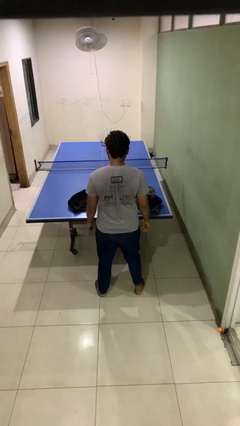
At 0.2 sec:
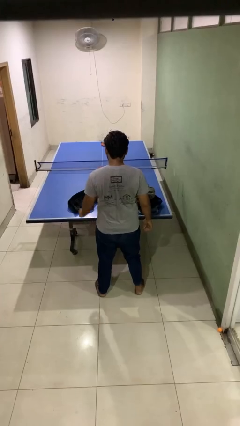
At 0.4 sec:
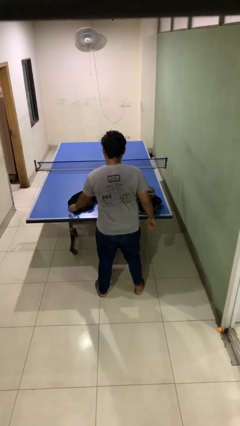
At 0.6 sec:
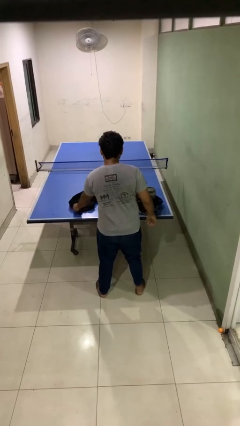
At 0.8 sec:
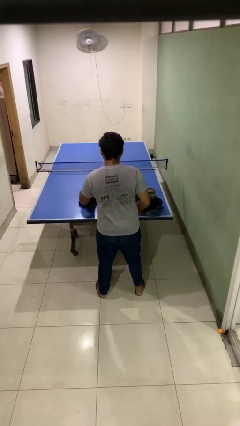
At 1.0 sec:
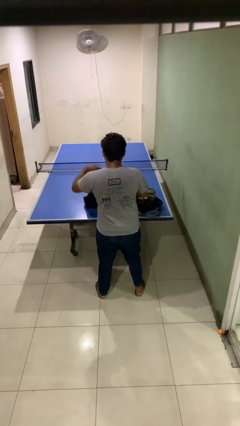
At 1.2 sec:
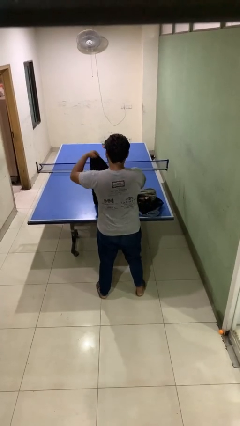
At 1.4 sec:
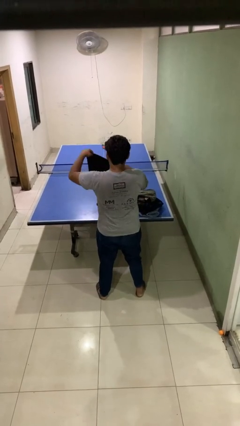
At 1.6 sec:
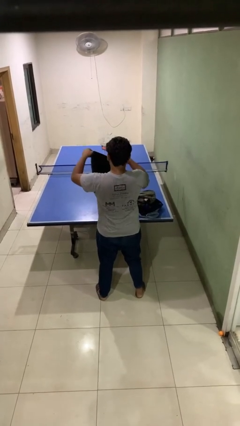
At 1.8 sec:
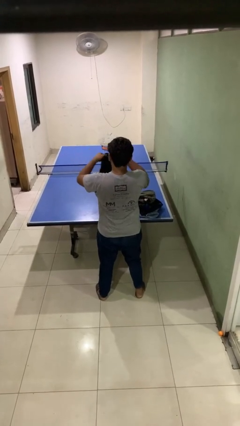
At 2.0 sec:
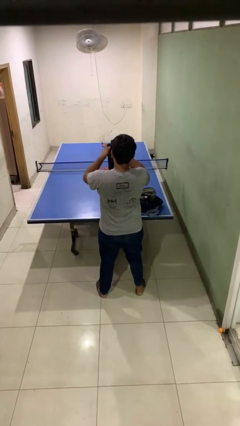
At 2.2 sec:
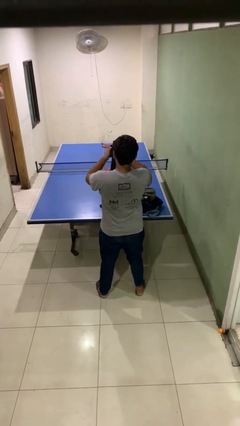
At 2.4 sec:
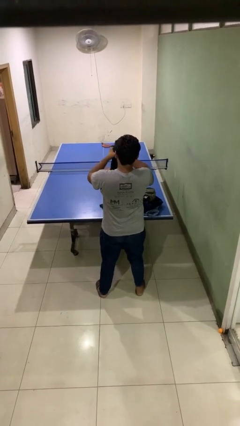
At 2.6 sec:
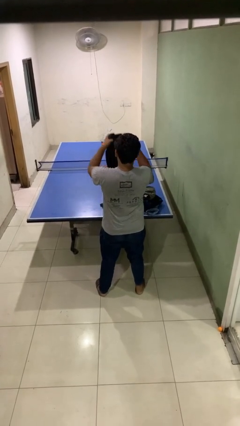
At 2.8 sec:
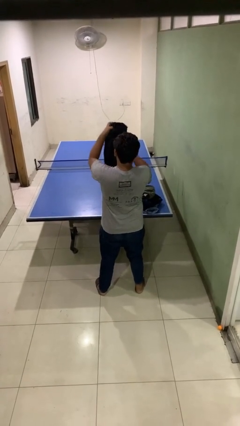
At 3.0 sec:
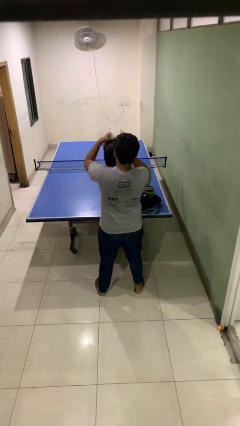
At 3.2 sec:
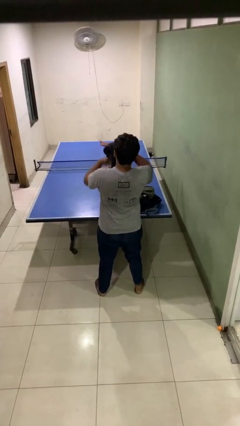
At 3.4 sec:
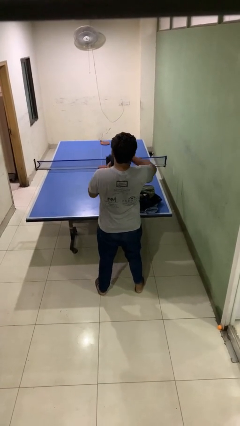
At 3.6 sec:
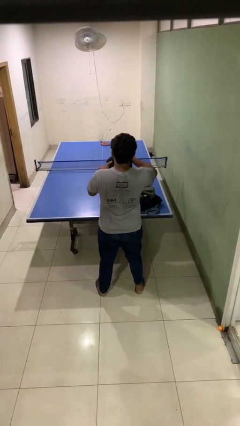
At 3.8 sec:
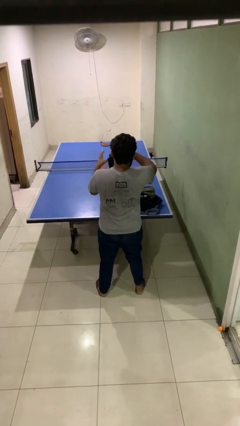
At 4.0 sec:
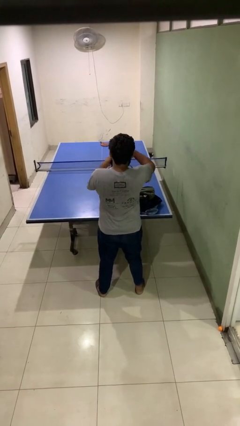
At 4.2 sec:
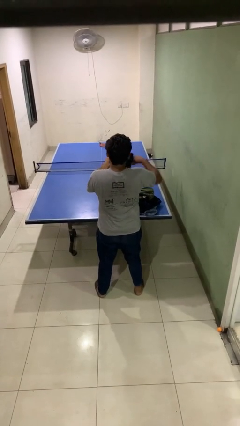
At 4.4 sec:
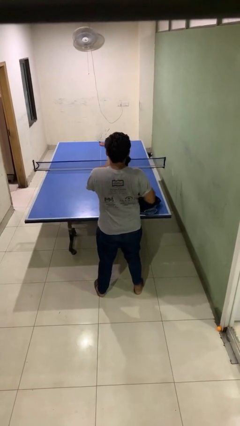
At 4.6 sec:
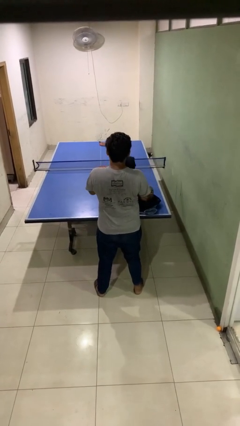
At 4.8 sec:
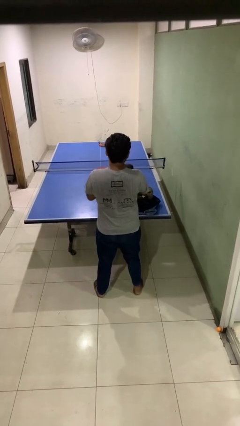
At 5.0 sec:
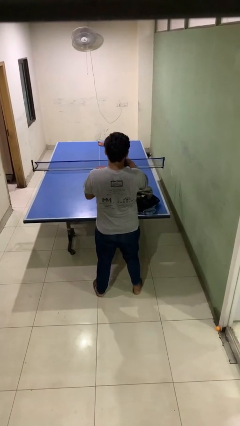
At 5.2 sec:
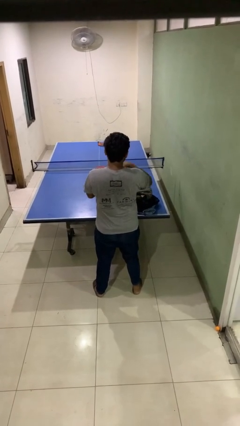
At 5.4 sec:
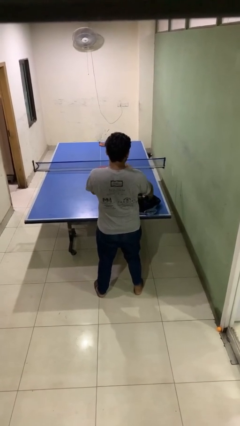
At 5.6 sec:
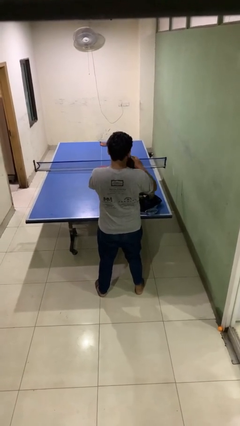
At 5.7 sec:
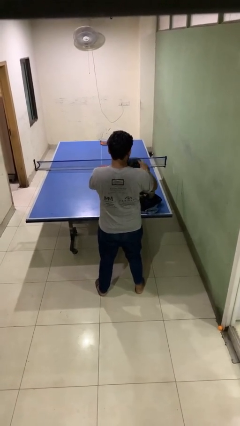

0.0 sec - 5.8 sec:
person folds pants

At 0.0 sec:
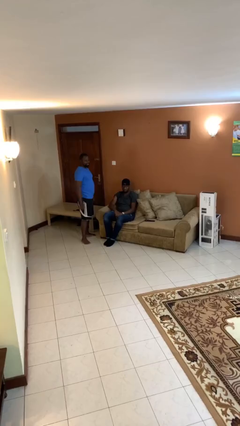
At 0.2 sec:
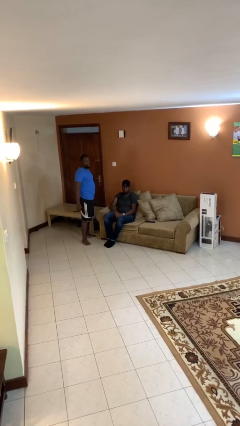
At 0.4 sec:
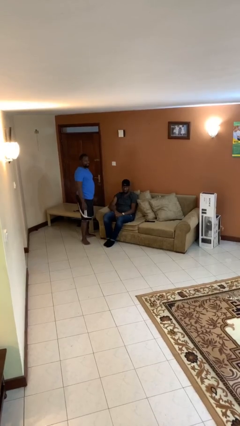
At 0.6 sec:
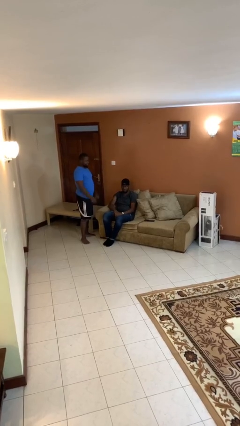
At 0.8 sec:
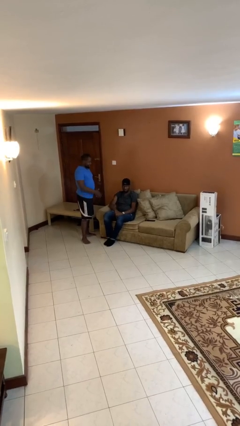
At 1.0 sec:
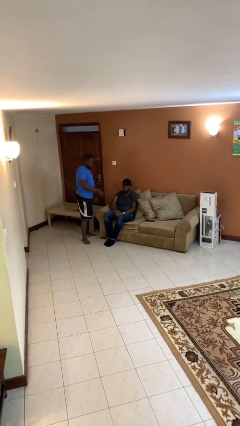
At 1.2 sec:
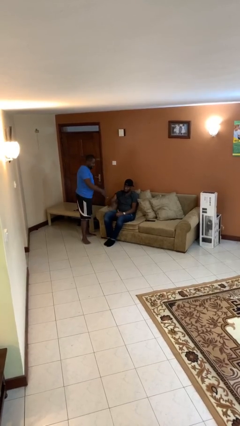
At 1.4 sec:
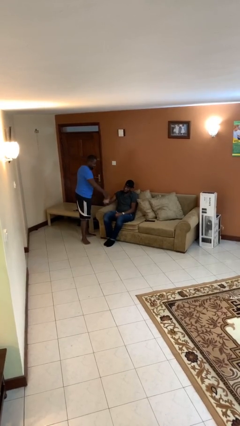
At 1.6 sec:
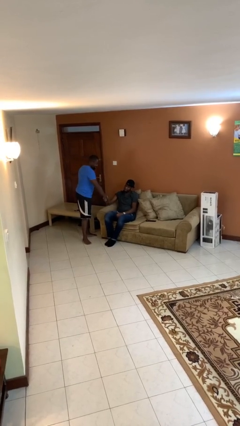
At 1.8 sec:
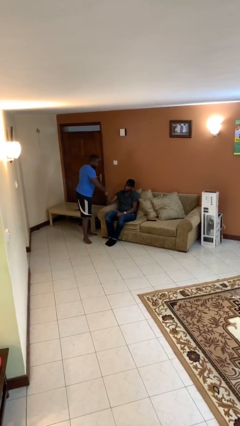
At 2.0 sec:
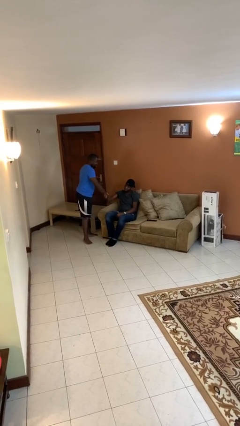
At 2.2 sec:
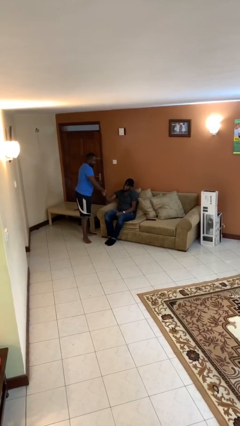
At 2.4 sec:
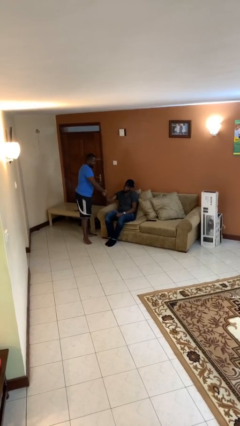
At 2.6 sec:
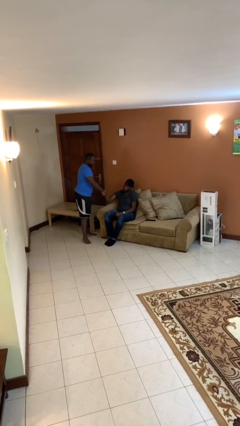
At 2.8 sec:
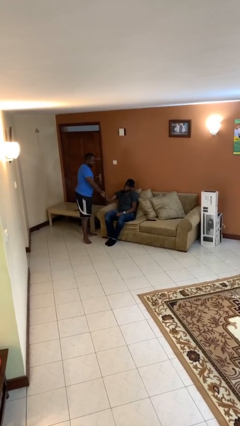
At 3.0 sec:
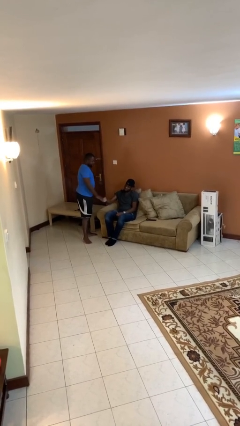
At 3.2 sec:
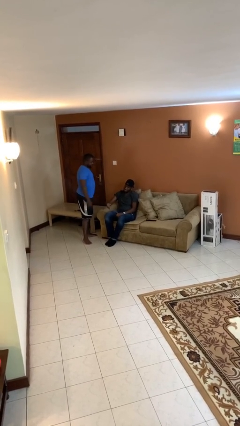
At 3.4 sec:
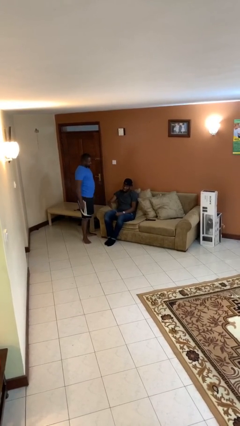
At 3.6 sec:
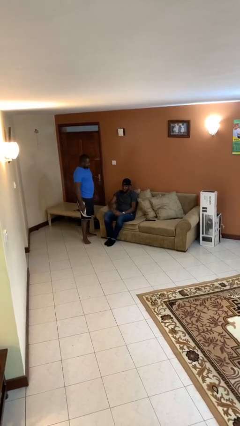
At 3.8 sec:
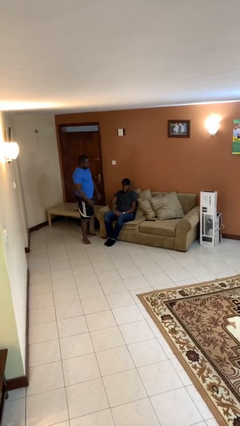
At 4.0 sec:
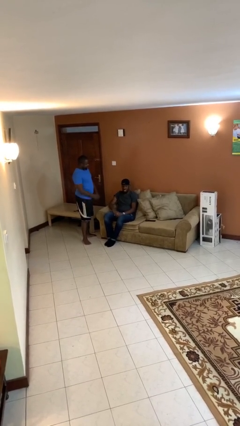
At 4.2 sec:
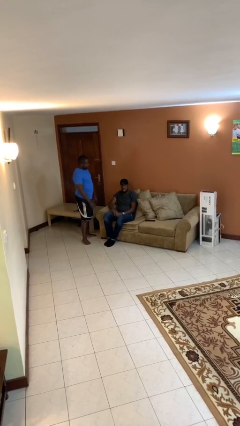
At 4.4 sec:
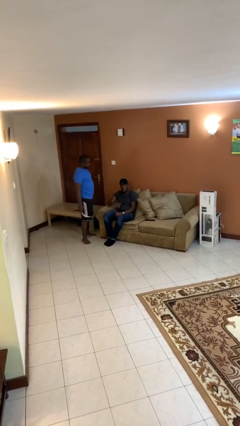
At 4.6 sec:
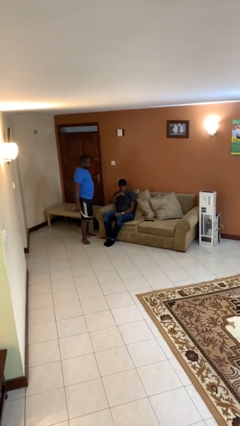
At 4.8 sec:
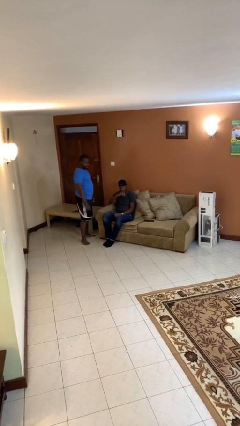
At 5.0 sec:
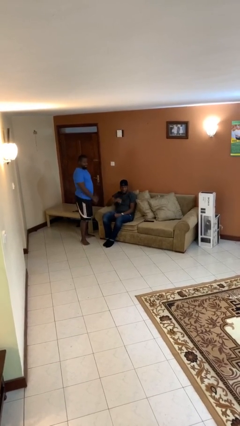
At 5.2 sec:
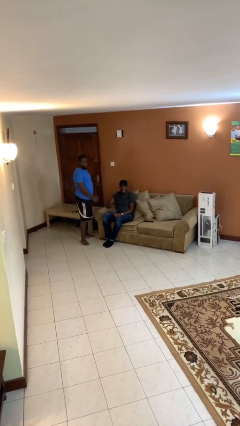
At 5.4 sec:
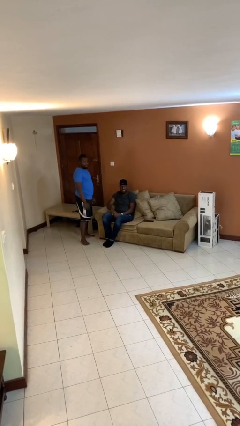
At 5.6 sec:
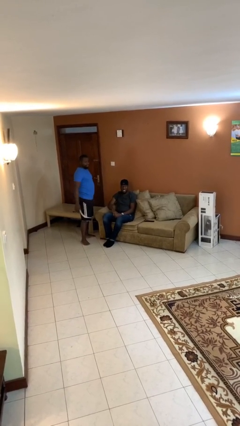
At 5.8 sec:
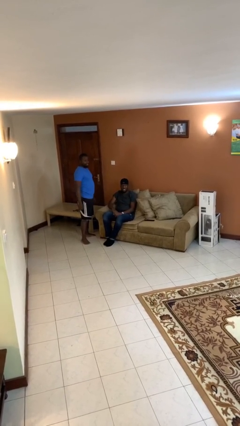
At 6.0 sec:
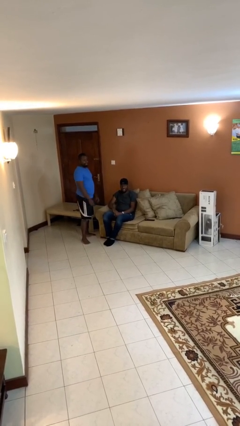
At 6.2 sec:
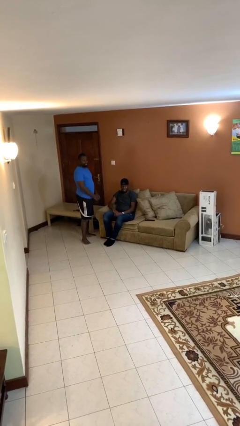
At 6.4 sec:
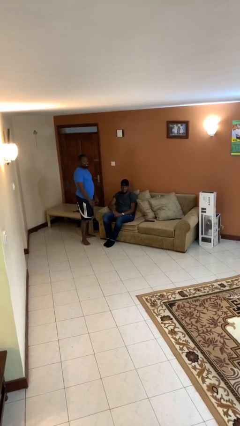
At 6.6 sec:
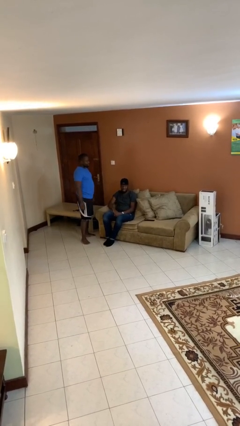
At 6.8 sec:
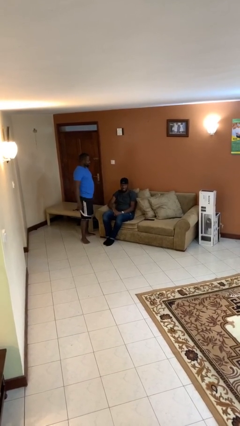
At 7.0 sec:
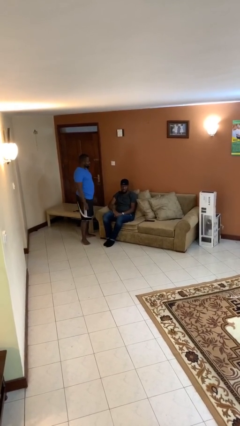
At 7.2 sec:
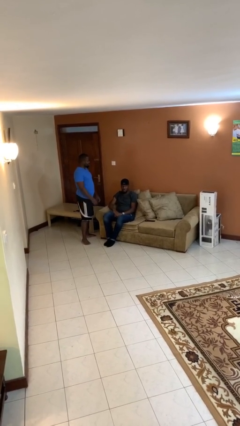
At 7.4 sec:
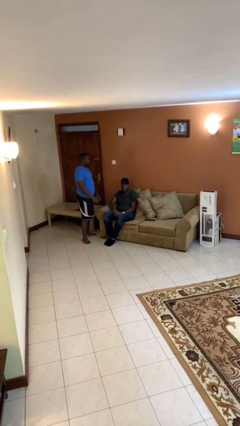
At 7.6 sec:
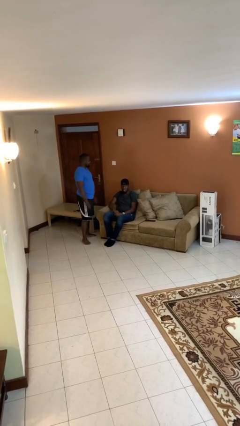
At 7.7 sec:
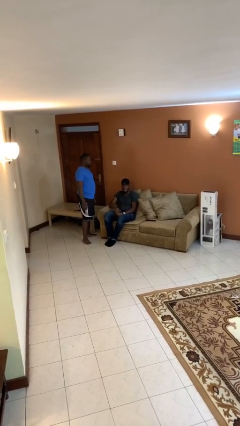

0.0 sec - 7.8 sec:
person shakes hand

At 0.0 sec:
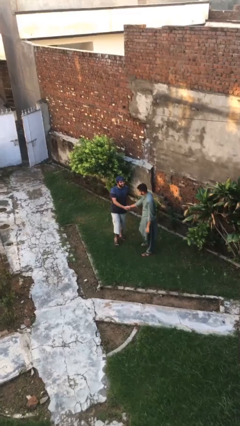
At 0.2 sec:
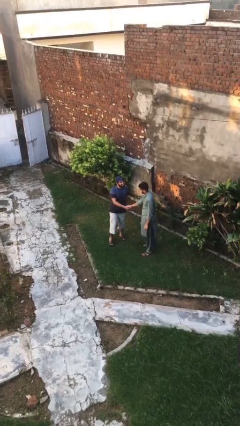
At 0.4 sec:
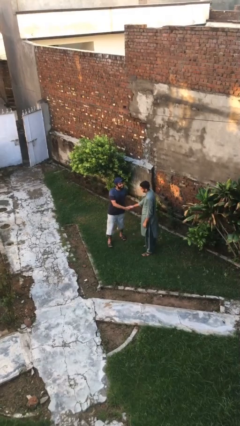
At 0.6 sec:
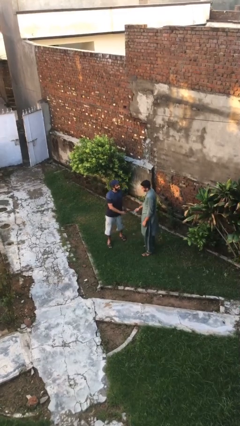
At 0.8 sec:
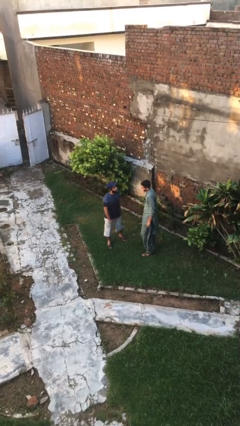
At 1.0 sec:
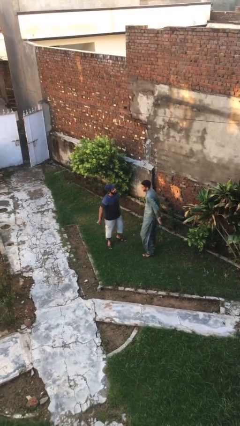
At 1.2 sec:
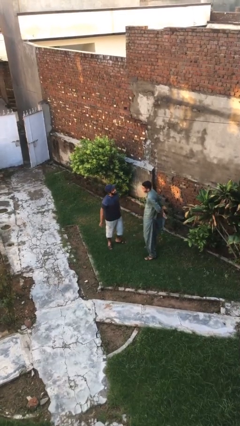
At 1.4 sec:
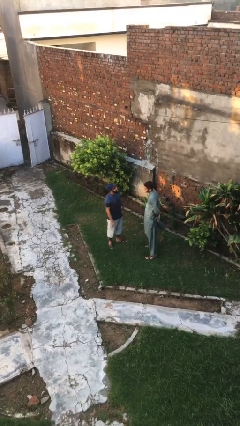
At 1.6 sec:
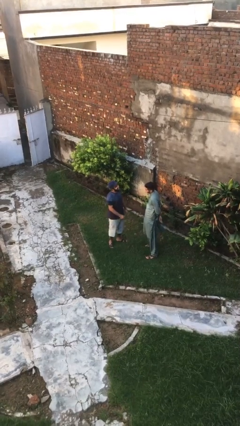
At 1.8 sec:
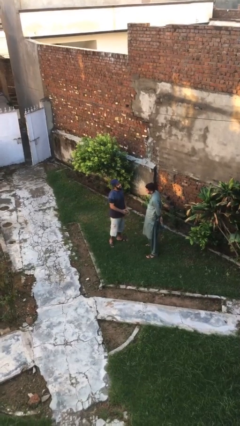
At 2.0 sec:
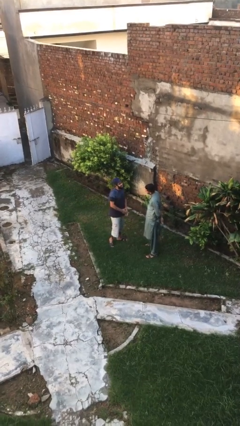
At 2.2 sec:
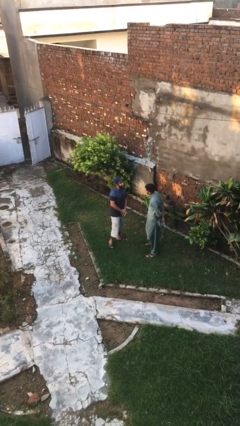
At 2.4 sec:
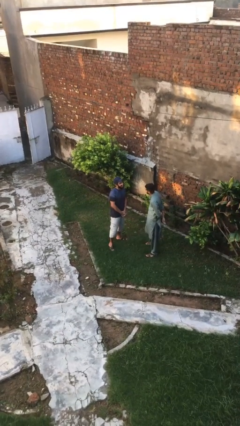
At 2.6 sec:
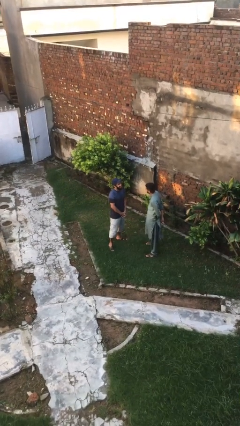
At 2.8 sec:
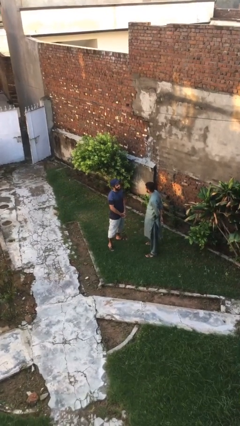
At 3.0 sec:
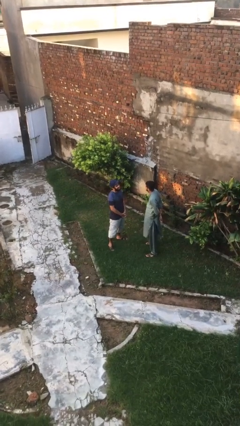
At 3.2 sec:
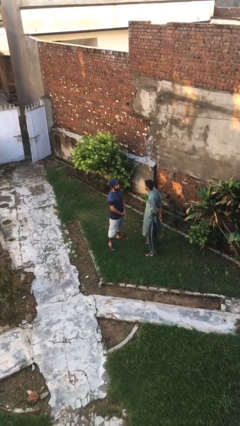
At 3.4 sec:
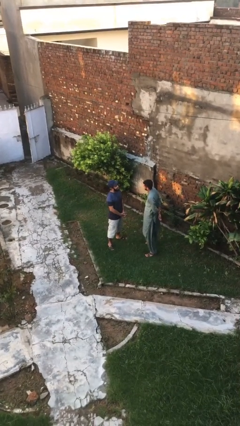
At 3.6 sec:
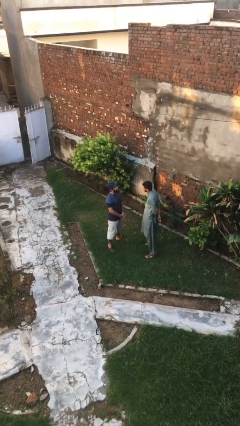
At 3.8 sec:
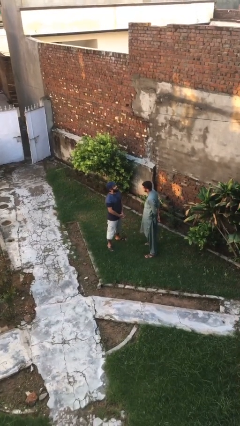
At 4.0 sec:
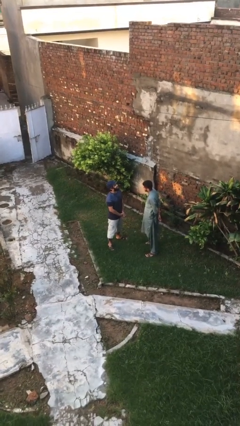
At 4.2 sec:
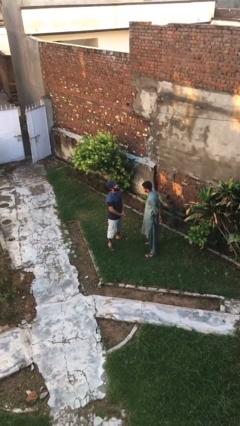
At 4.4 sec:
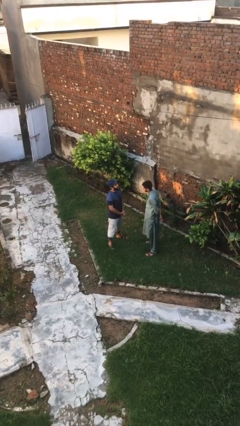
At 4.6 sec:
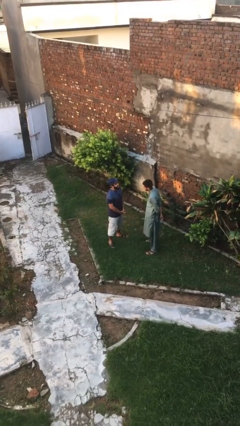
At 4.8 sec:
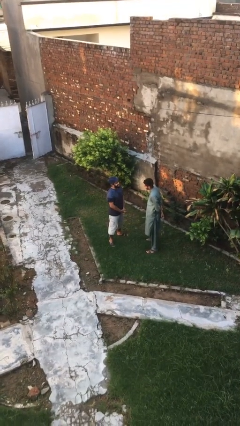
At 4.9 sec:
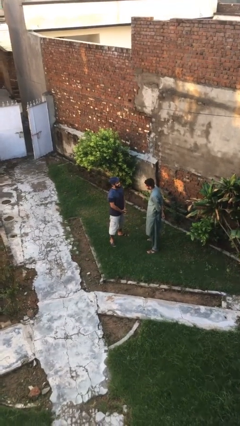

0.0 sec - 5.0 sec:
person talks to person
